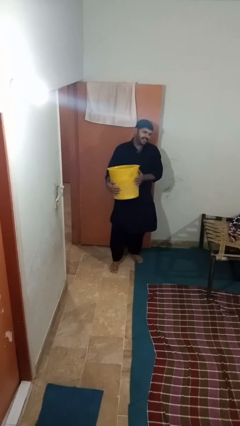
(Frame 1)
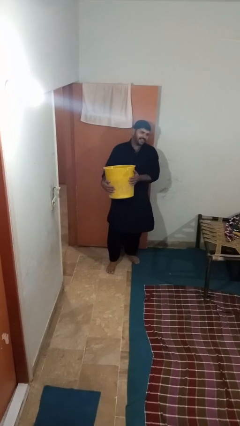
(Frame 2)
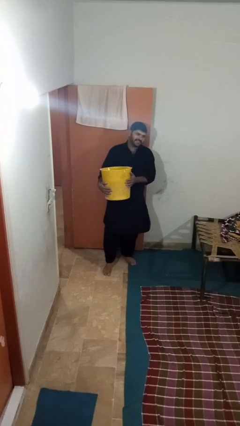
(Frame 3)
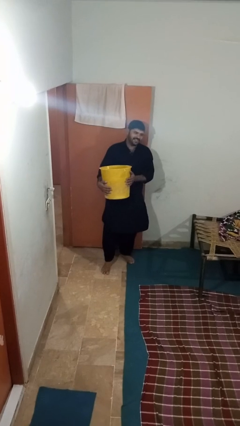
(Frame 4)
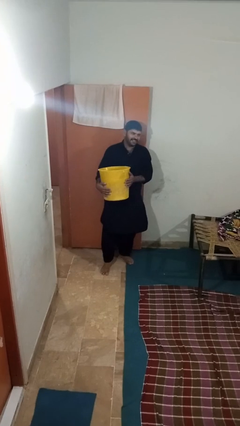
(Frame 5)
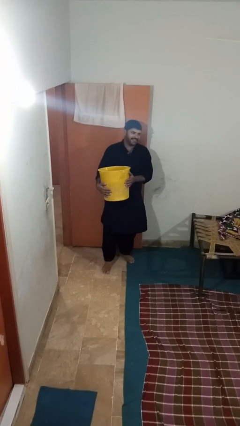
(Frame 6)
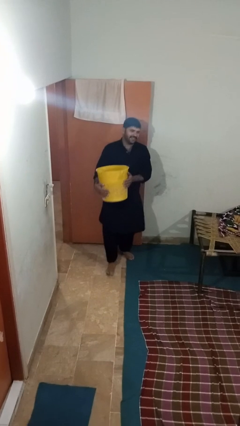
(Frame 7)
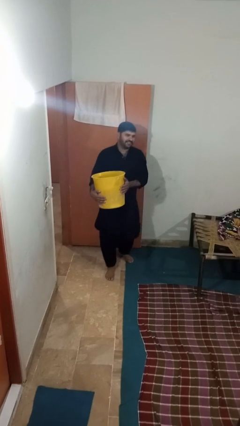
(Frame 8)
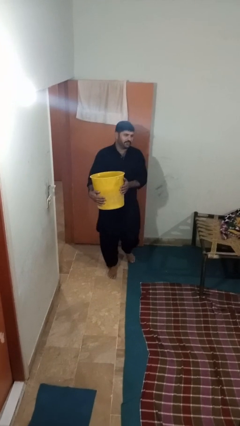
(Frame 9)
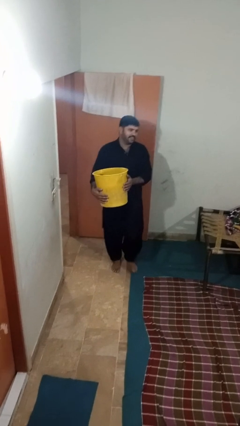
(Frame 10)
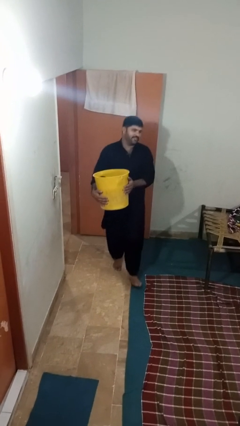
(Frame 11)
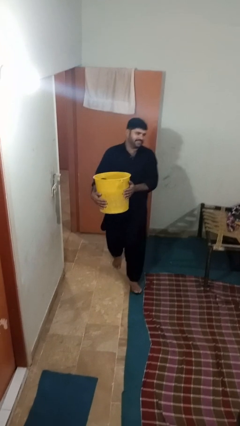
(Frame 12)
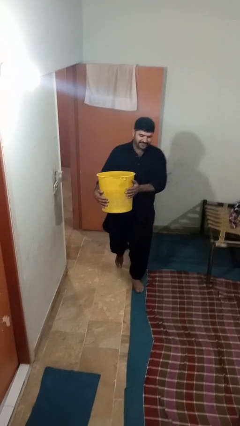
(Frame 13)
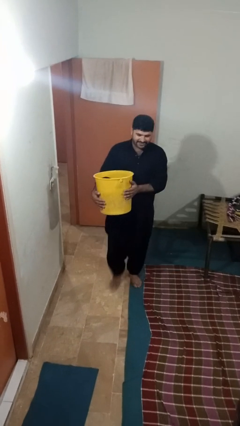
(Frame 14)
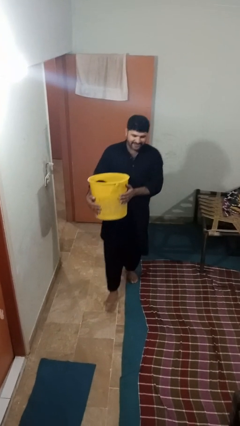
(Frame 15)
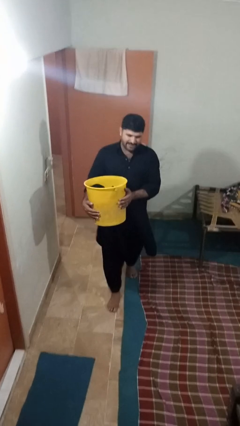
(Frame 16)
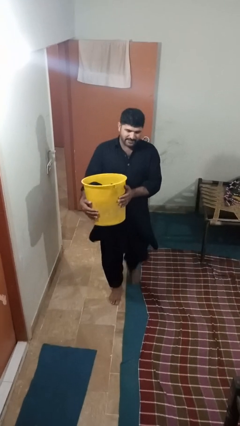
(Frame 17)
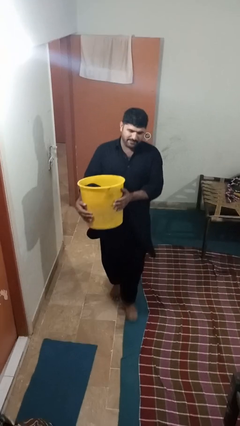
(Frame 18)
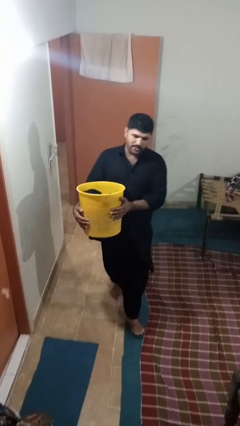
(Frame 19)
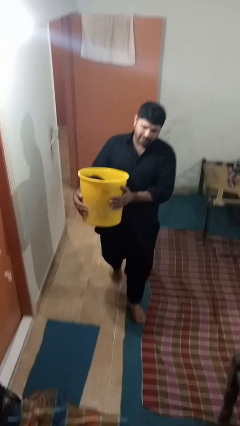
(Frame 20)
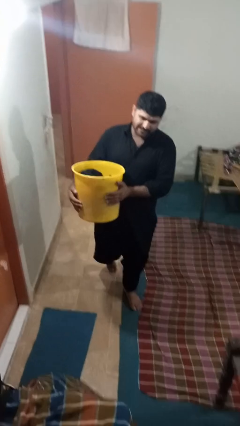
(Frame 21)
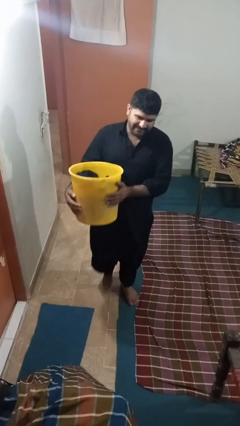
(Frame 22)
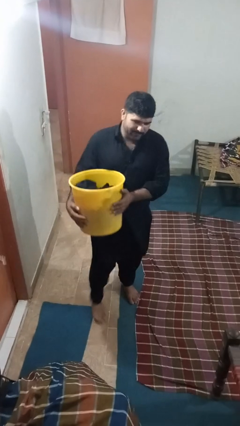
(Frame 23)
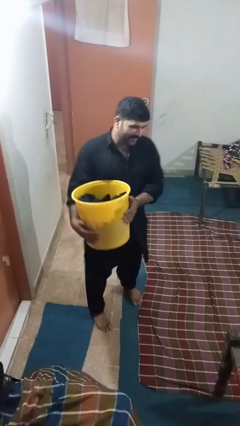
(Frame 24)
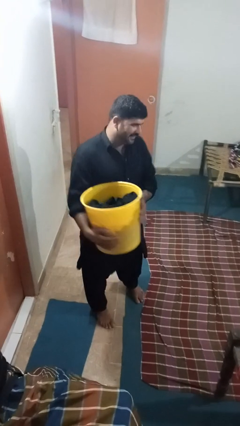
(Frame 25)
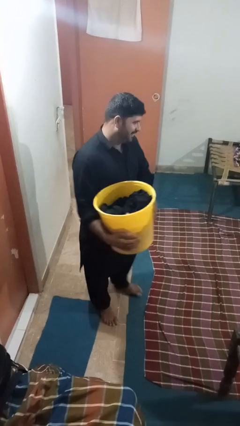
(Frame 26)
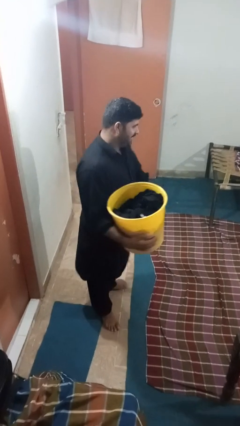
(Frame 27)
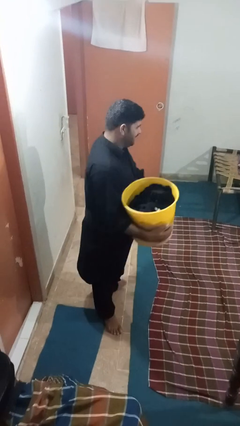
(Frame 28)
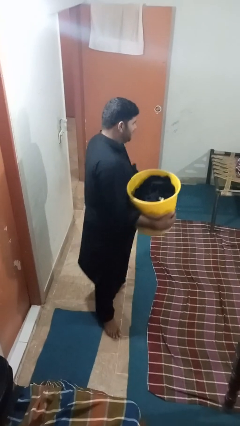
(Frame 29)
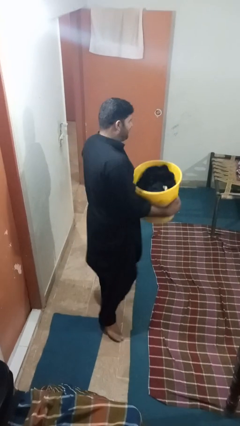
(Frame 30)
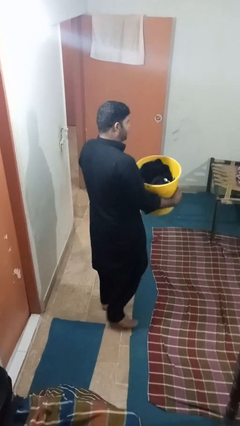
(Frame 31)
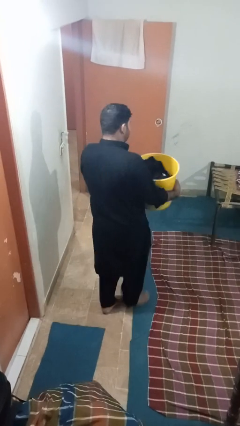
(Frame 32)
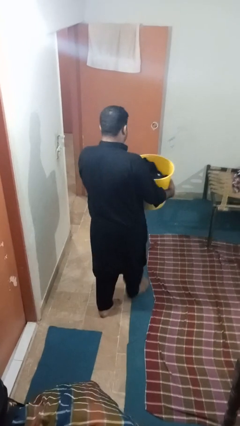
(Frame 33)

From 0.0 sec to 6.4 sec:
person carries laundry basket

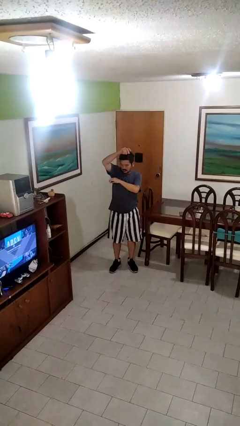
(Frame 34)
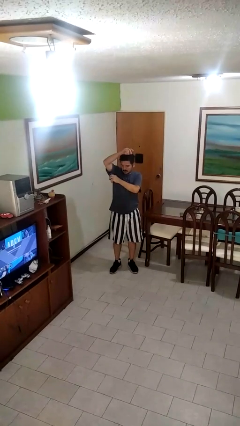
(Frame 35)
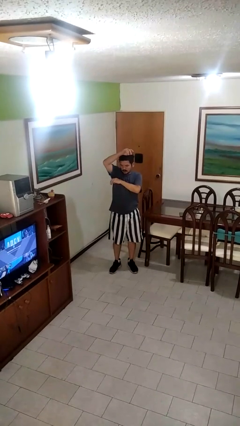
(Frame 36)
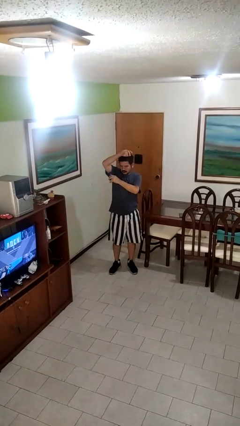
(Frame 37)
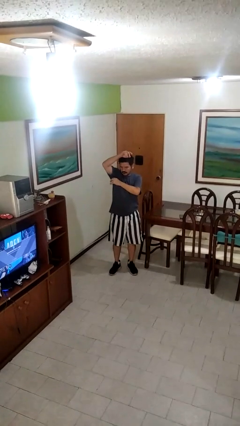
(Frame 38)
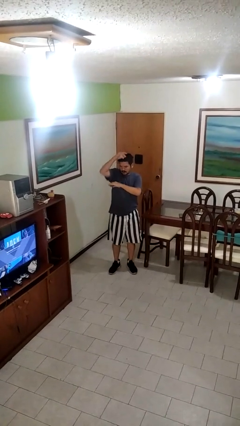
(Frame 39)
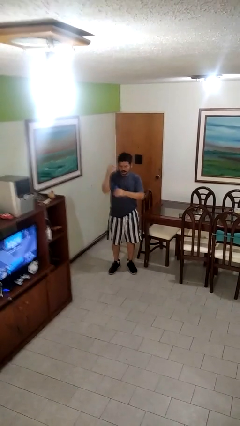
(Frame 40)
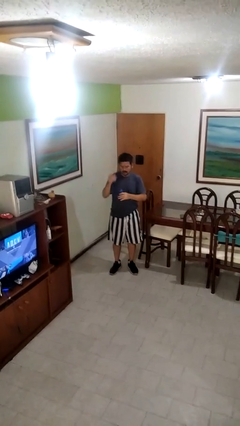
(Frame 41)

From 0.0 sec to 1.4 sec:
person applies deodorant

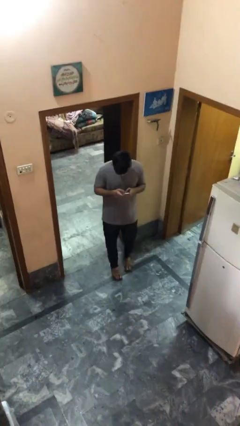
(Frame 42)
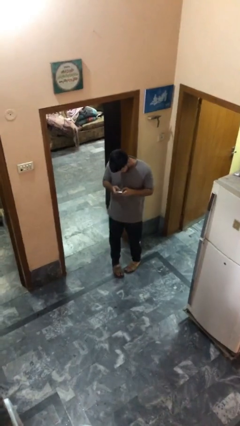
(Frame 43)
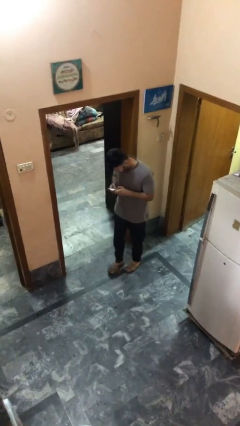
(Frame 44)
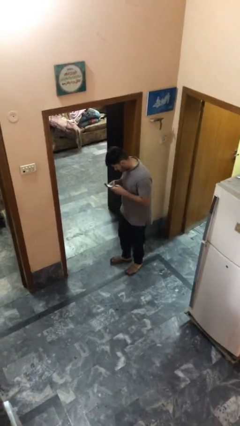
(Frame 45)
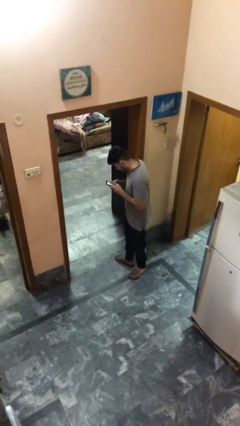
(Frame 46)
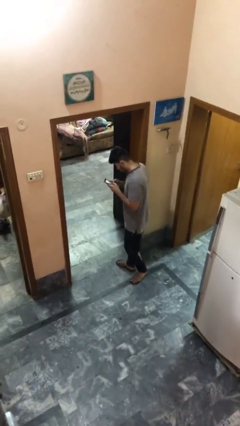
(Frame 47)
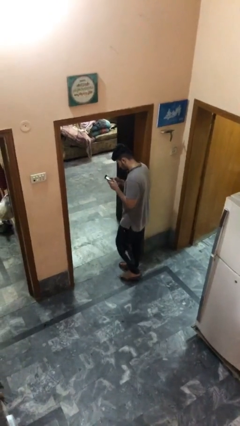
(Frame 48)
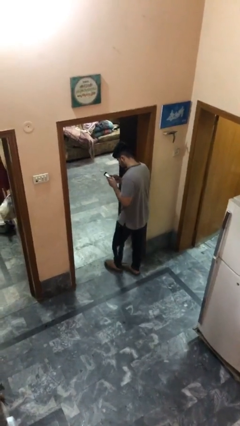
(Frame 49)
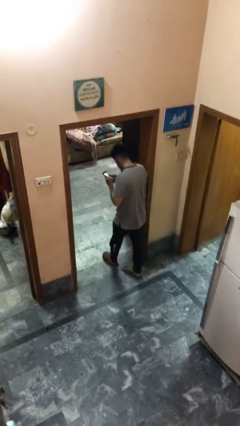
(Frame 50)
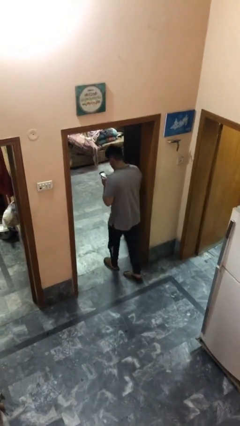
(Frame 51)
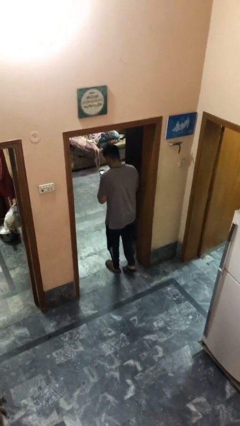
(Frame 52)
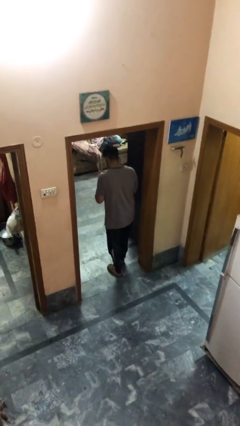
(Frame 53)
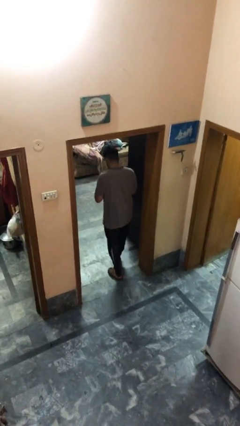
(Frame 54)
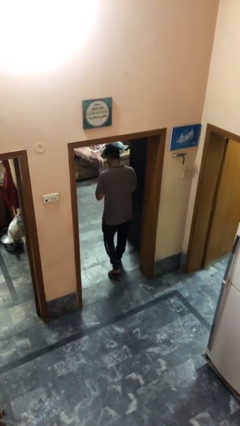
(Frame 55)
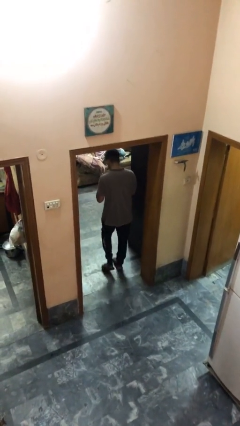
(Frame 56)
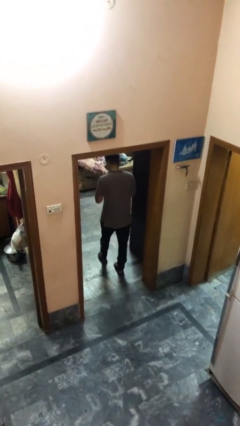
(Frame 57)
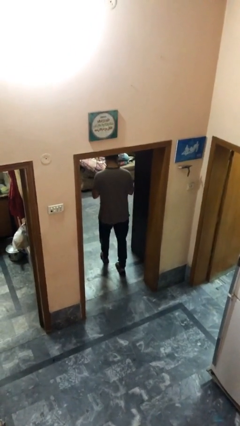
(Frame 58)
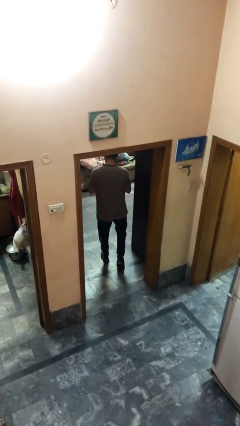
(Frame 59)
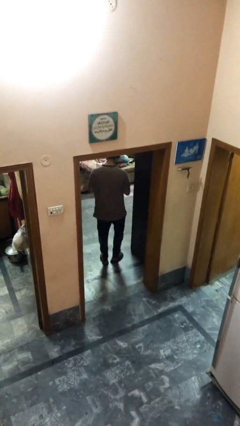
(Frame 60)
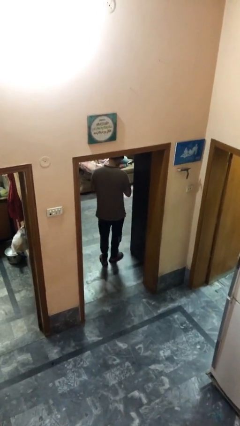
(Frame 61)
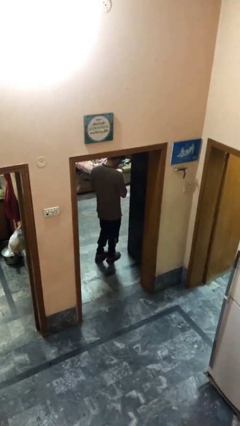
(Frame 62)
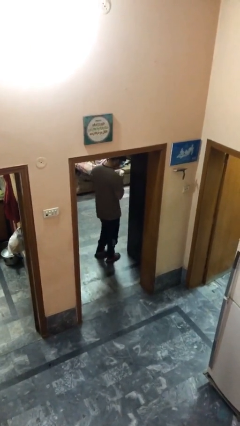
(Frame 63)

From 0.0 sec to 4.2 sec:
person exits scene through structure

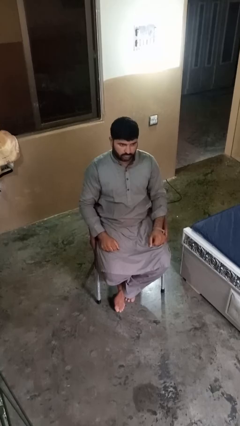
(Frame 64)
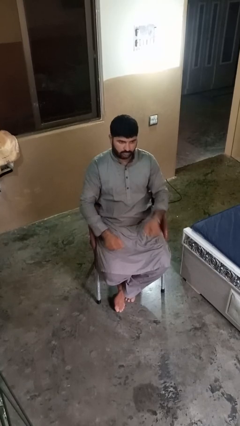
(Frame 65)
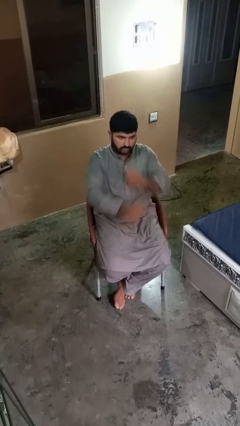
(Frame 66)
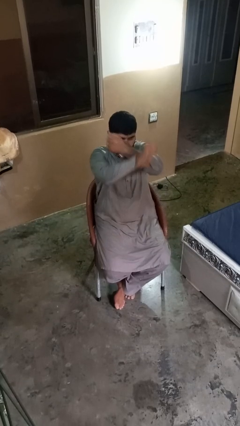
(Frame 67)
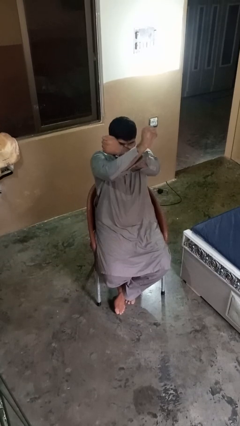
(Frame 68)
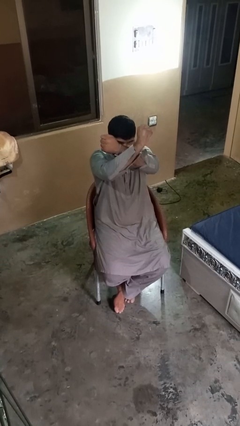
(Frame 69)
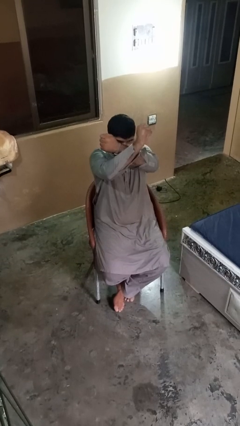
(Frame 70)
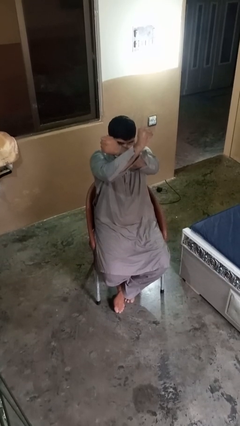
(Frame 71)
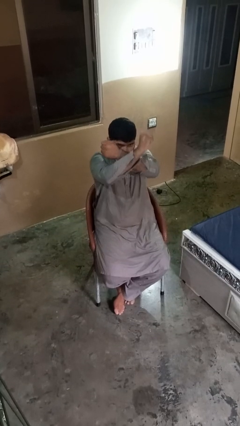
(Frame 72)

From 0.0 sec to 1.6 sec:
person gestures arms x

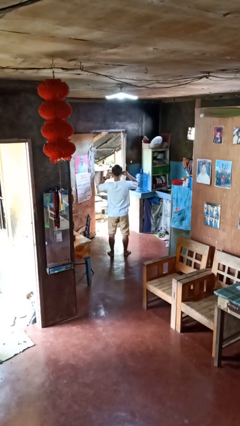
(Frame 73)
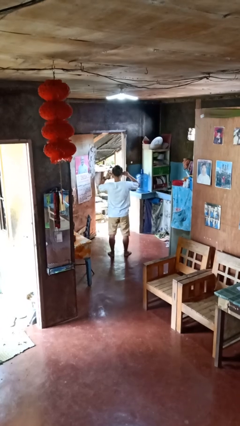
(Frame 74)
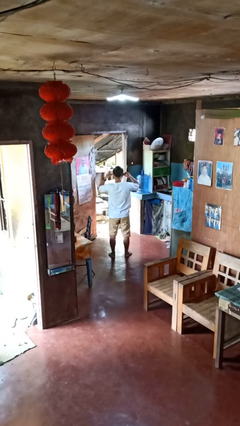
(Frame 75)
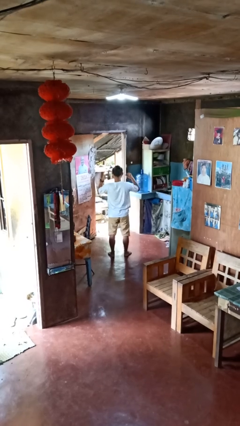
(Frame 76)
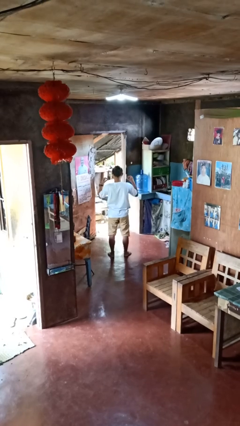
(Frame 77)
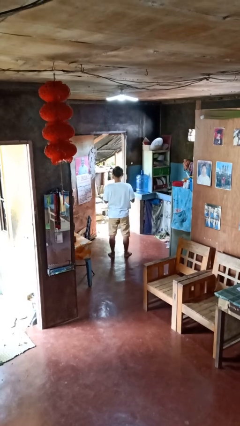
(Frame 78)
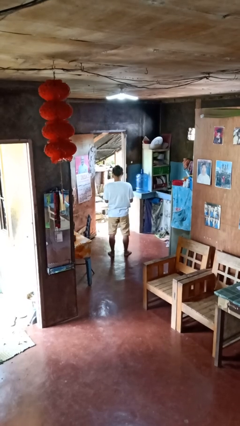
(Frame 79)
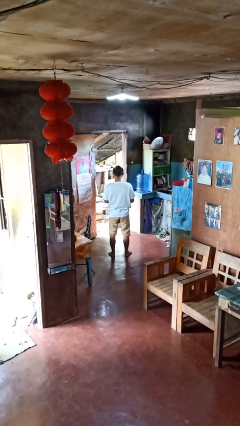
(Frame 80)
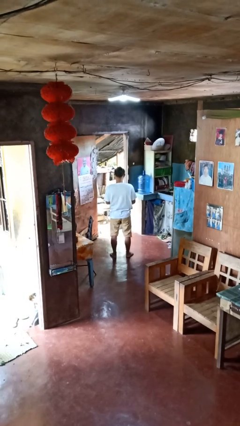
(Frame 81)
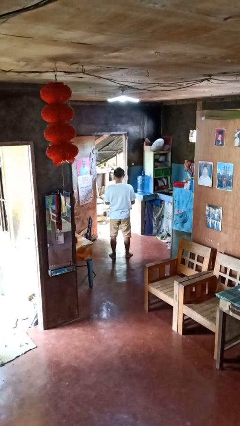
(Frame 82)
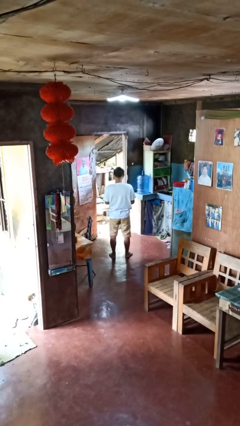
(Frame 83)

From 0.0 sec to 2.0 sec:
person takes off headphones

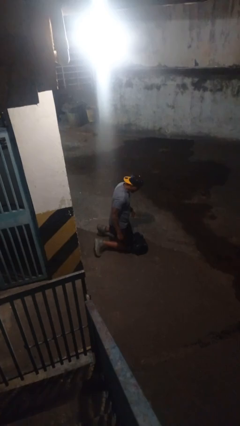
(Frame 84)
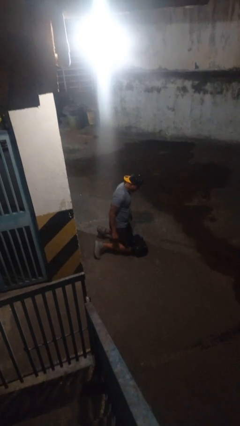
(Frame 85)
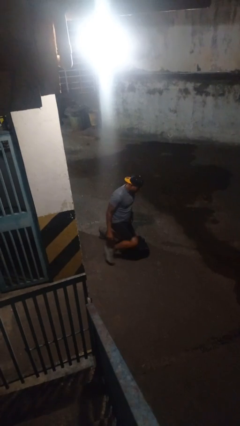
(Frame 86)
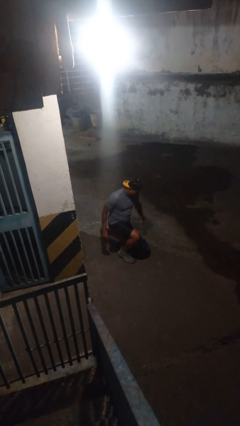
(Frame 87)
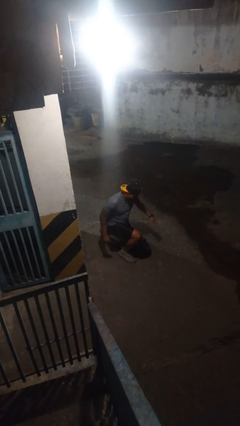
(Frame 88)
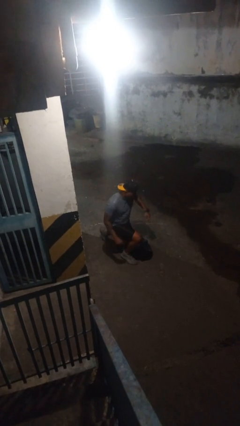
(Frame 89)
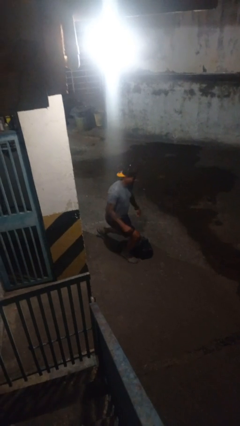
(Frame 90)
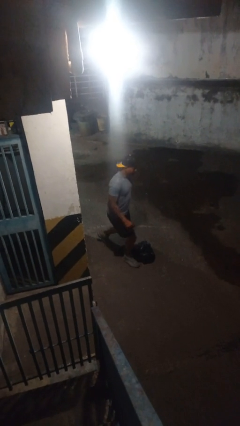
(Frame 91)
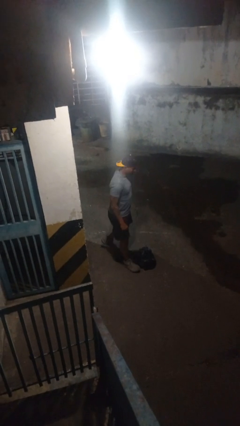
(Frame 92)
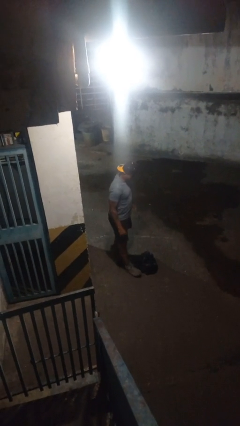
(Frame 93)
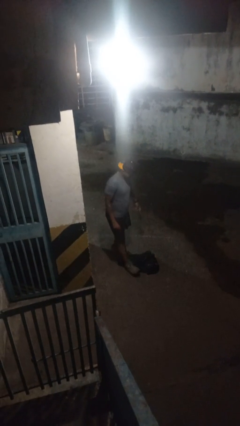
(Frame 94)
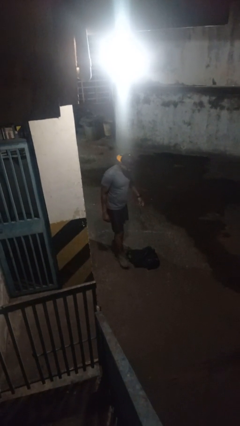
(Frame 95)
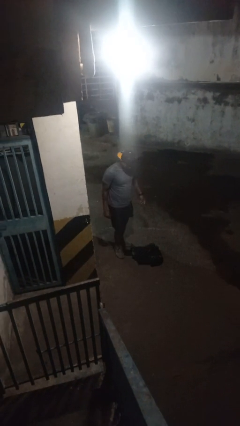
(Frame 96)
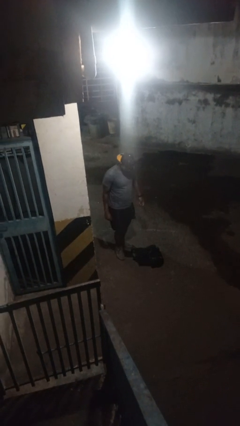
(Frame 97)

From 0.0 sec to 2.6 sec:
person stands up from floor
